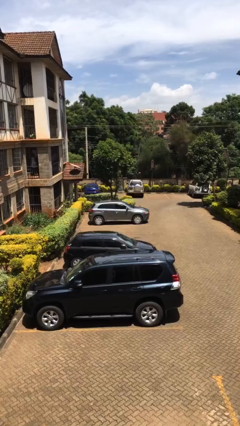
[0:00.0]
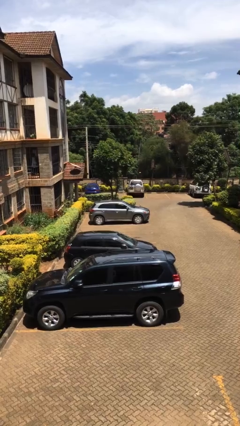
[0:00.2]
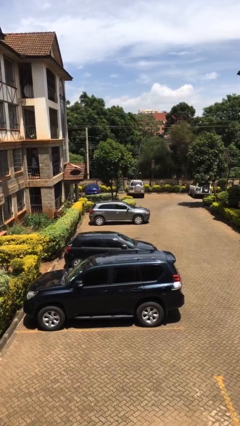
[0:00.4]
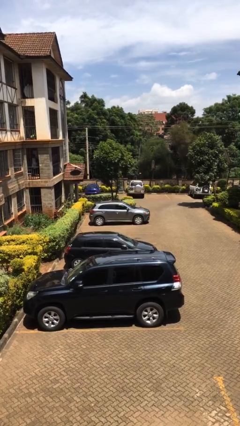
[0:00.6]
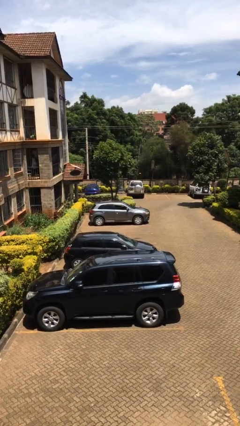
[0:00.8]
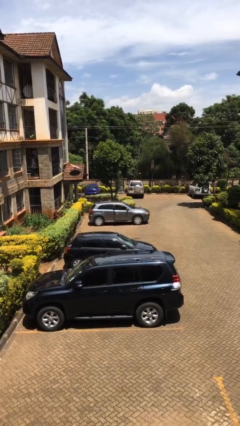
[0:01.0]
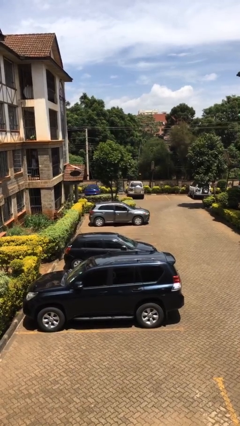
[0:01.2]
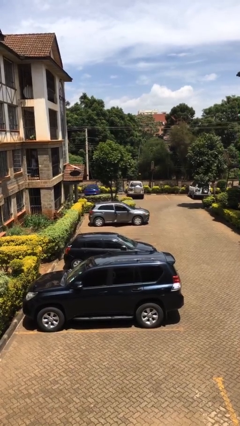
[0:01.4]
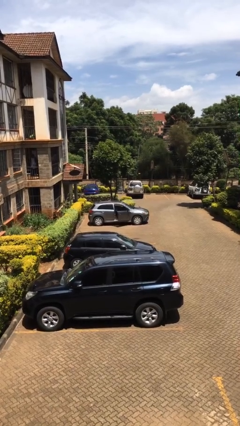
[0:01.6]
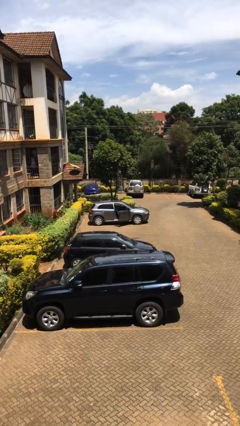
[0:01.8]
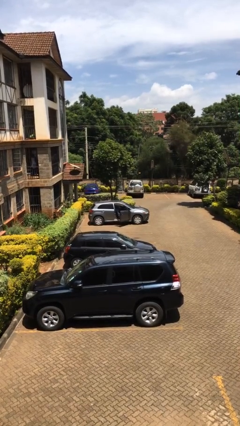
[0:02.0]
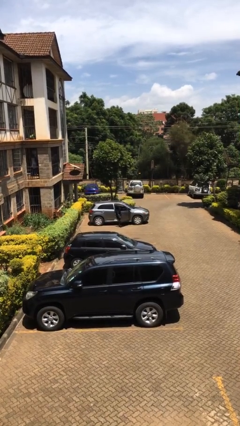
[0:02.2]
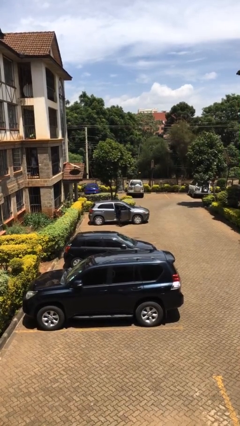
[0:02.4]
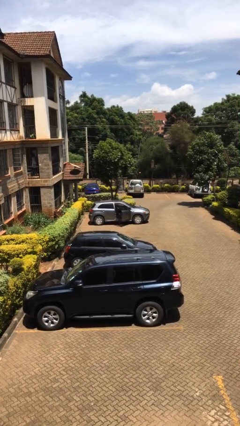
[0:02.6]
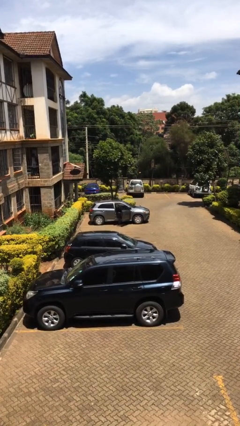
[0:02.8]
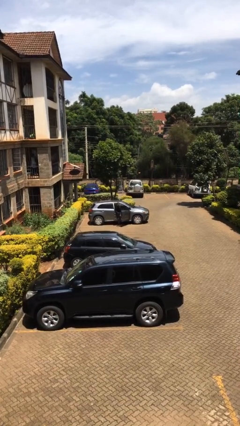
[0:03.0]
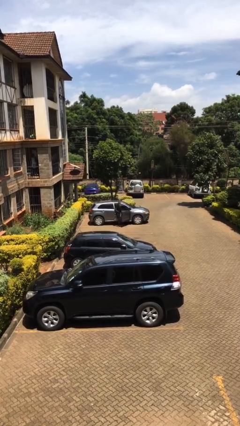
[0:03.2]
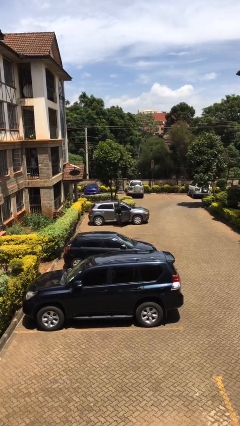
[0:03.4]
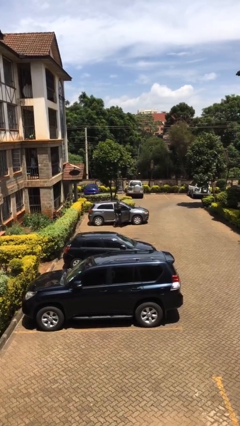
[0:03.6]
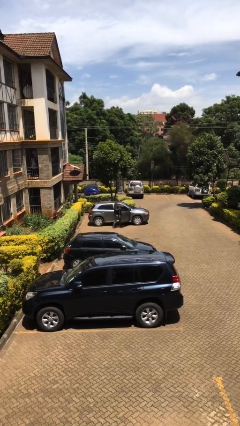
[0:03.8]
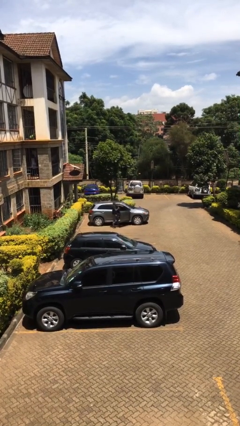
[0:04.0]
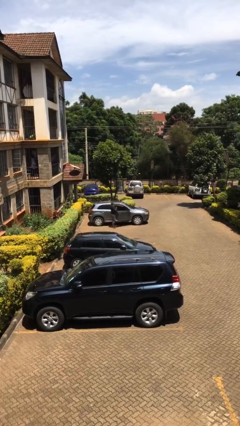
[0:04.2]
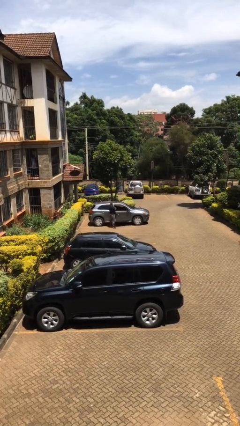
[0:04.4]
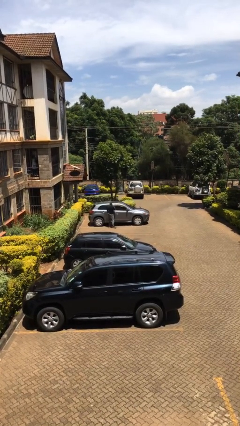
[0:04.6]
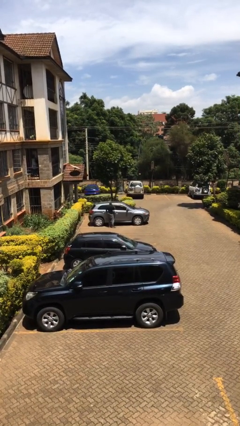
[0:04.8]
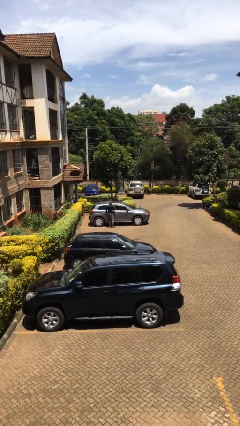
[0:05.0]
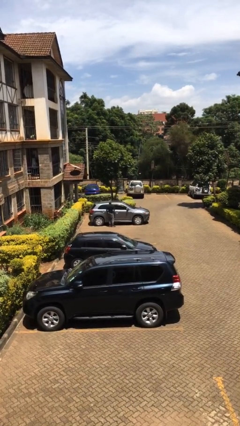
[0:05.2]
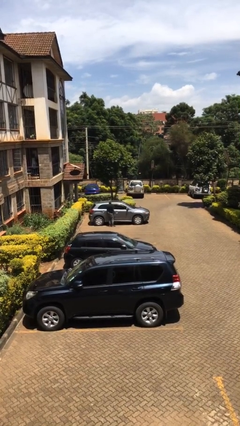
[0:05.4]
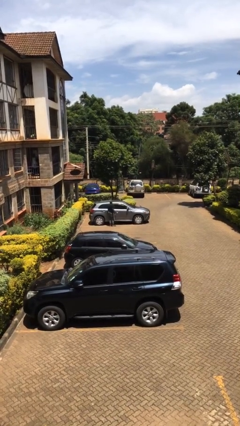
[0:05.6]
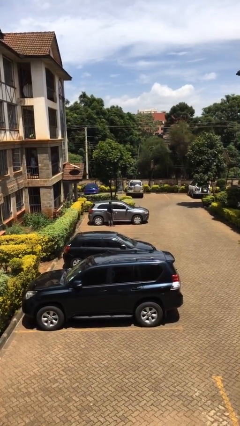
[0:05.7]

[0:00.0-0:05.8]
car drops off person

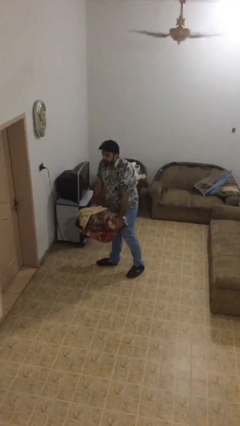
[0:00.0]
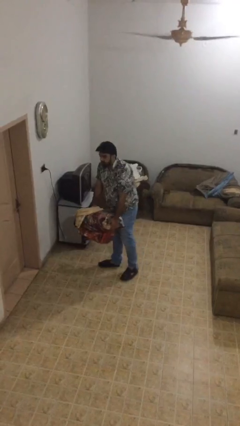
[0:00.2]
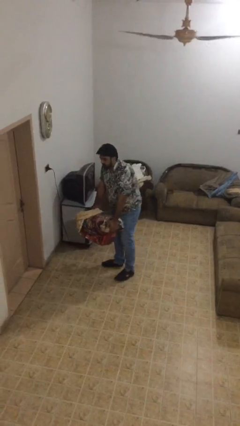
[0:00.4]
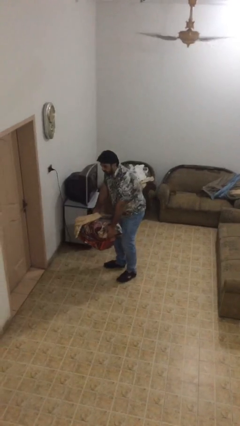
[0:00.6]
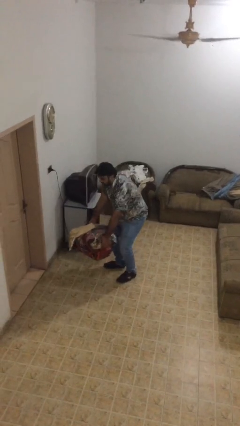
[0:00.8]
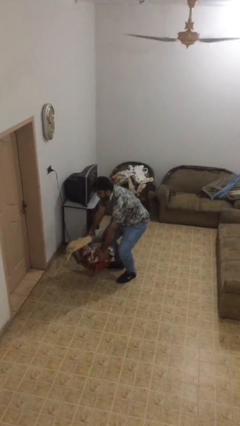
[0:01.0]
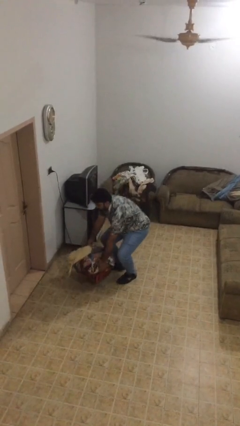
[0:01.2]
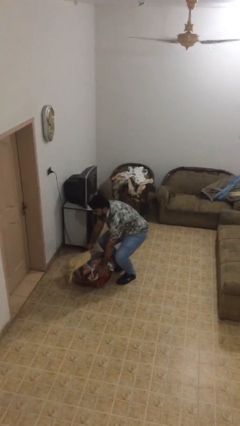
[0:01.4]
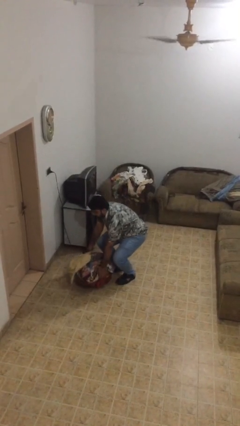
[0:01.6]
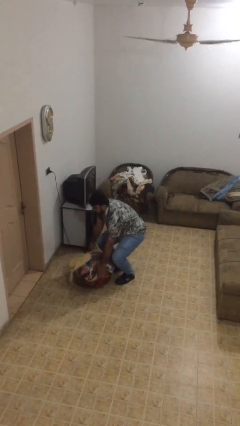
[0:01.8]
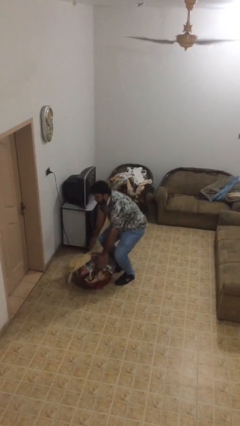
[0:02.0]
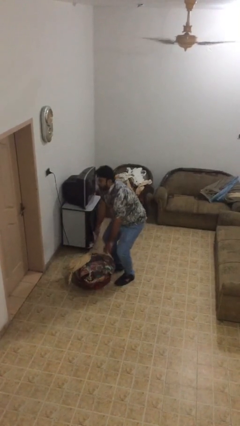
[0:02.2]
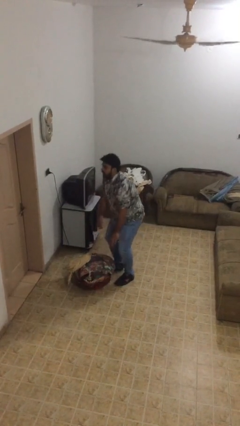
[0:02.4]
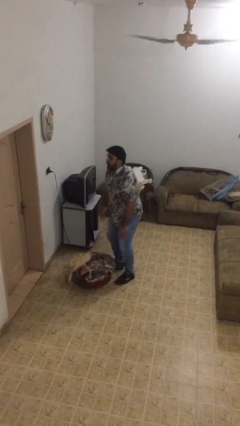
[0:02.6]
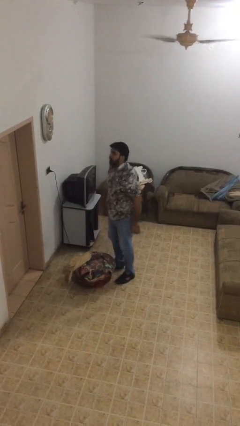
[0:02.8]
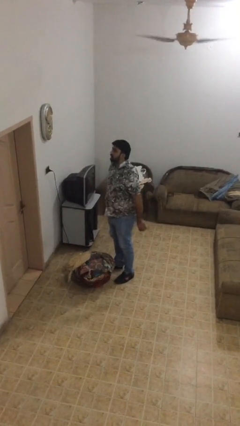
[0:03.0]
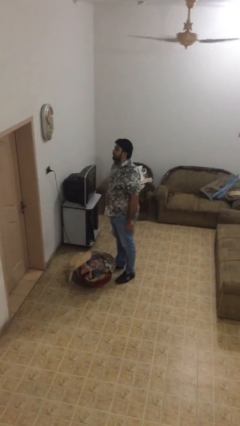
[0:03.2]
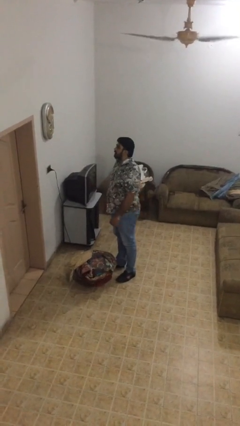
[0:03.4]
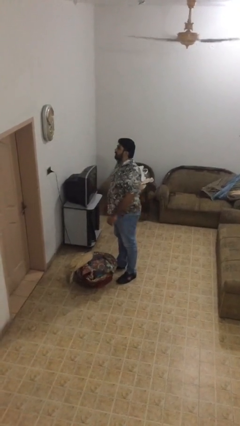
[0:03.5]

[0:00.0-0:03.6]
person puts down object on floor

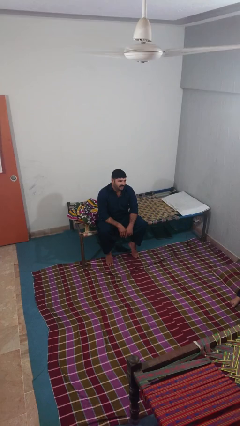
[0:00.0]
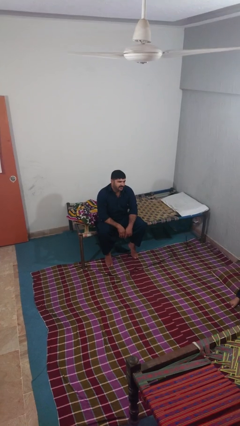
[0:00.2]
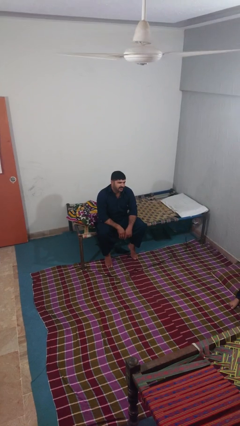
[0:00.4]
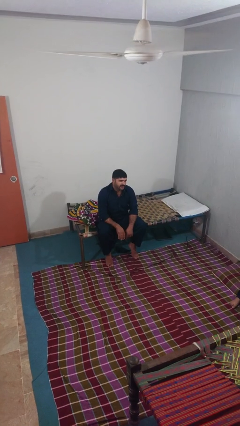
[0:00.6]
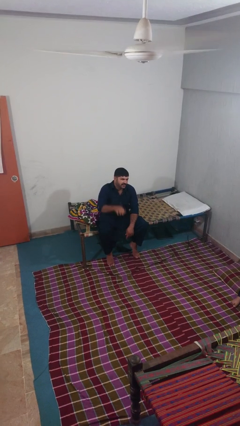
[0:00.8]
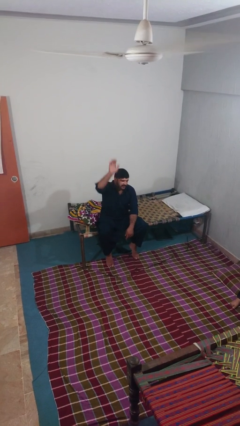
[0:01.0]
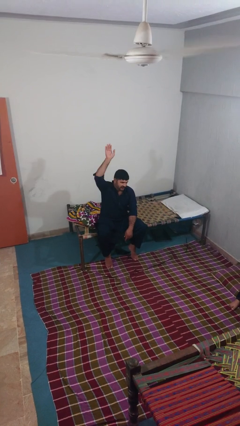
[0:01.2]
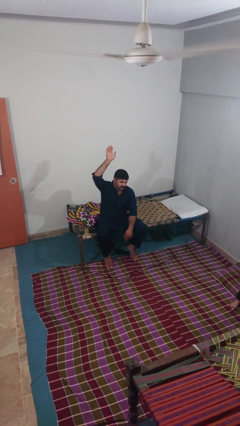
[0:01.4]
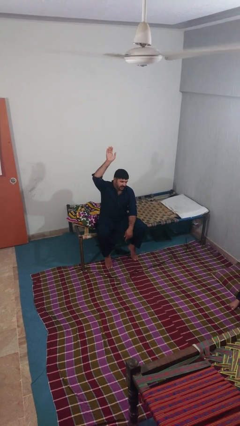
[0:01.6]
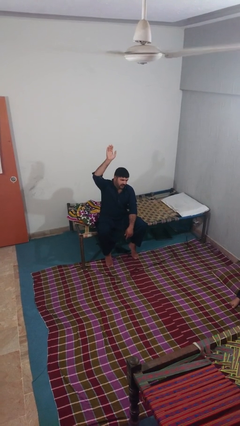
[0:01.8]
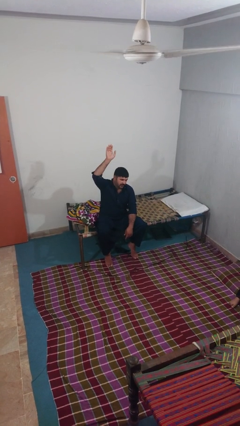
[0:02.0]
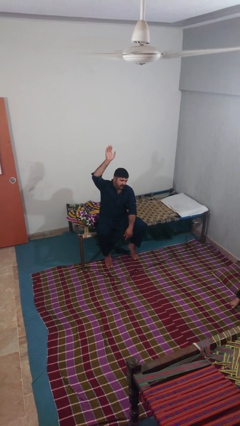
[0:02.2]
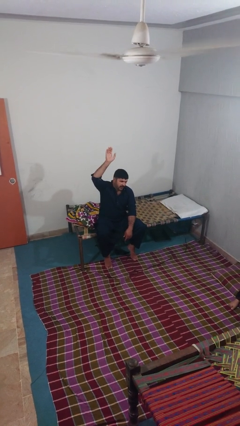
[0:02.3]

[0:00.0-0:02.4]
person gestures raise hand

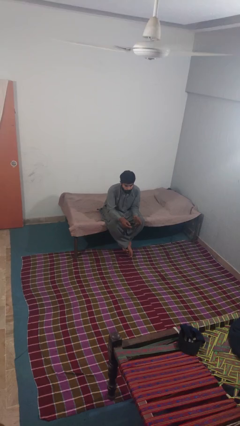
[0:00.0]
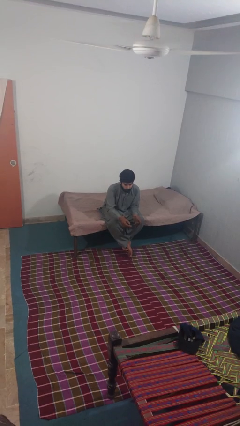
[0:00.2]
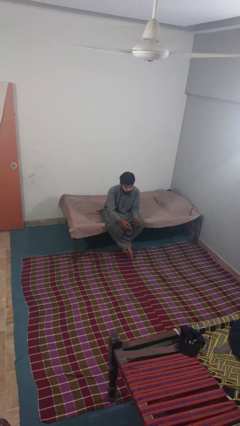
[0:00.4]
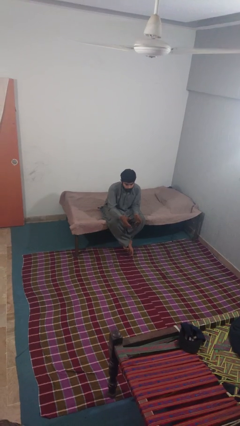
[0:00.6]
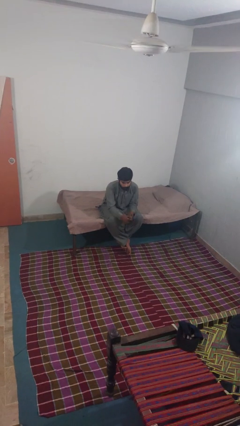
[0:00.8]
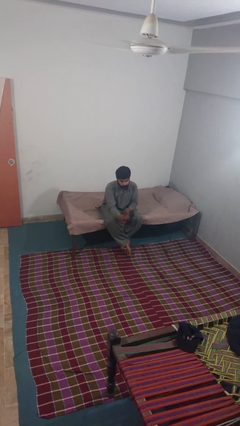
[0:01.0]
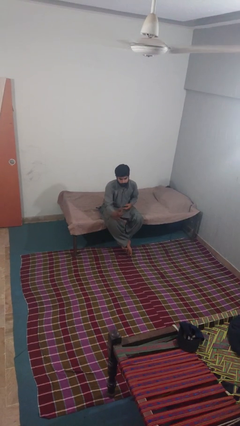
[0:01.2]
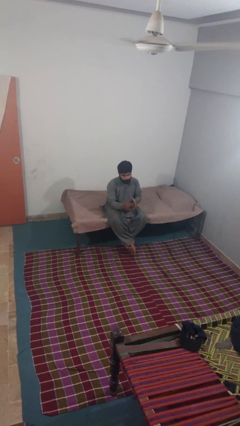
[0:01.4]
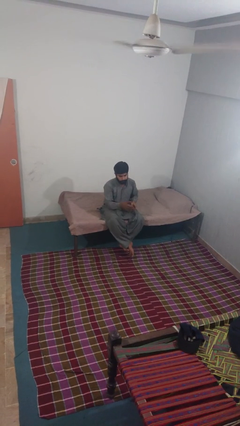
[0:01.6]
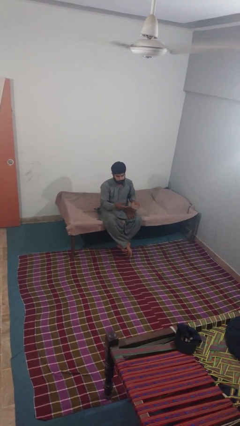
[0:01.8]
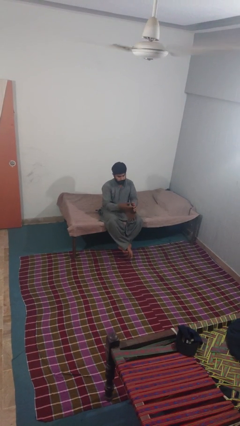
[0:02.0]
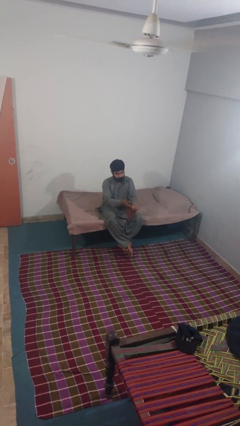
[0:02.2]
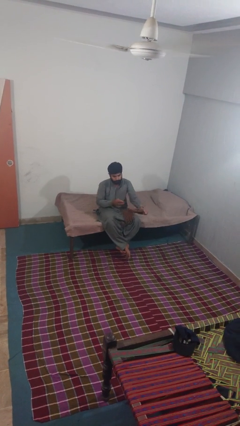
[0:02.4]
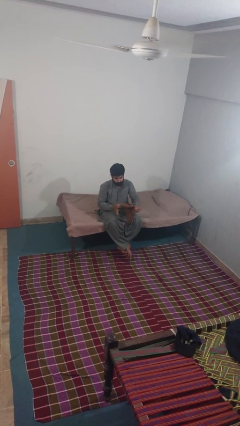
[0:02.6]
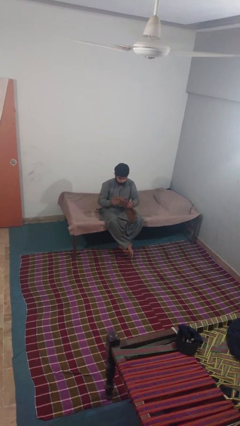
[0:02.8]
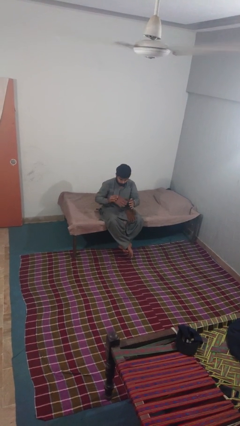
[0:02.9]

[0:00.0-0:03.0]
person takes off gloves

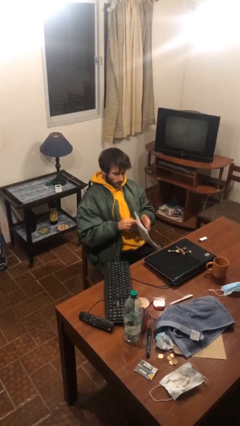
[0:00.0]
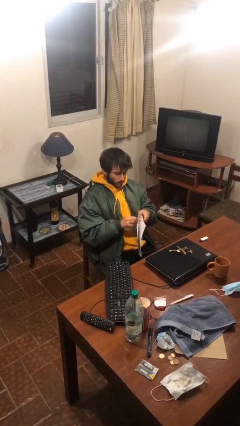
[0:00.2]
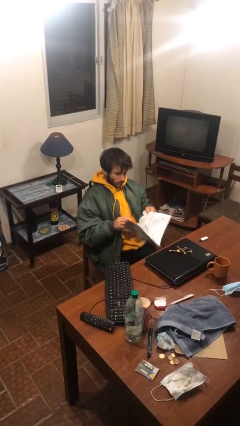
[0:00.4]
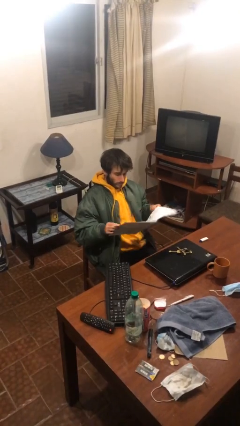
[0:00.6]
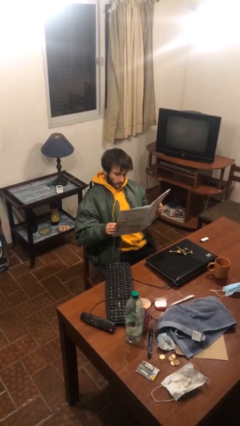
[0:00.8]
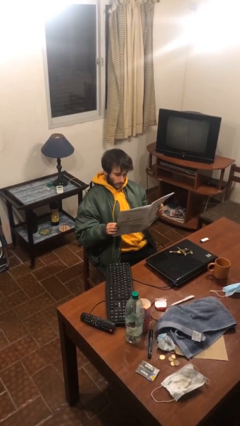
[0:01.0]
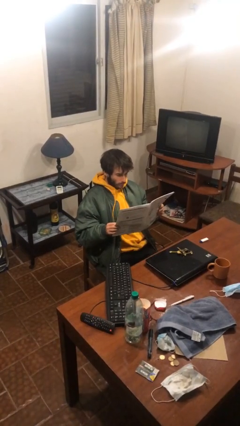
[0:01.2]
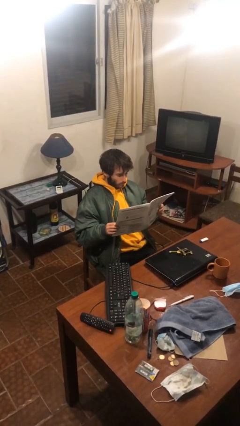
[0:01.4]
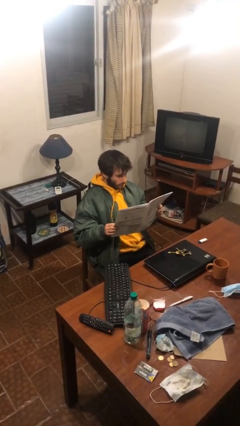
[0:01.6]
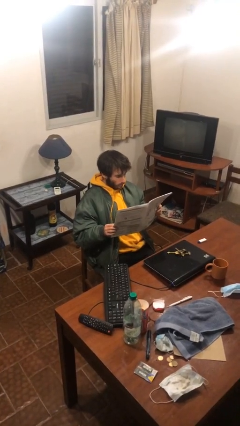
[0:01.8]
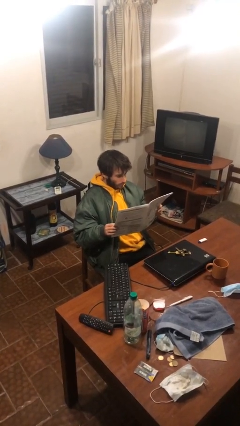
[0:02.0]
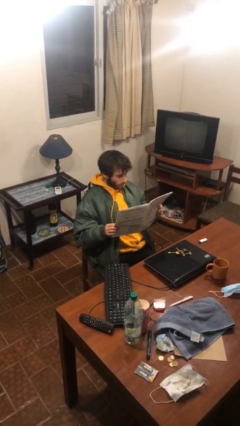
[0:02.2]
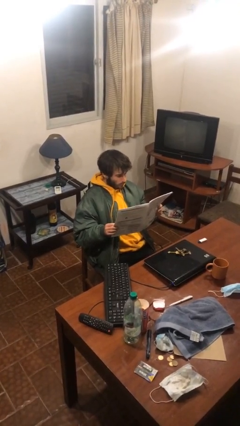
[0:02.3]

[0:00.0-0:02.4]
person reads document

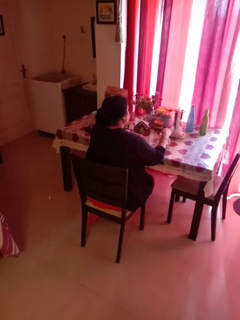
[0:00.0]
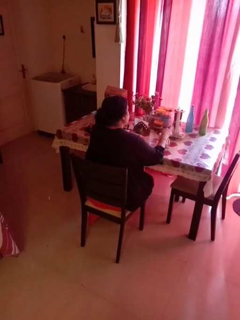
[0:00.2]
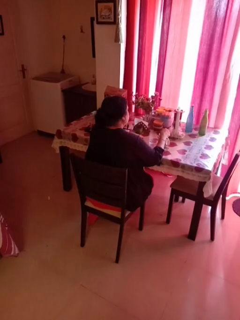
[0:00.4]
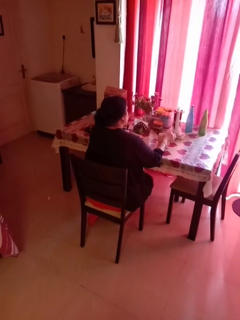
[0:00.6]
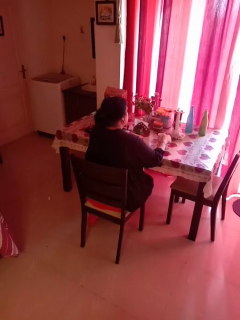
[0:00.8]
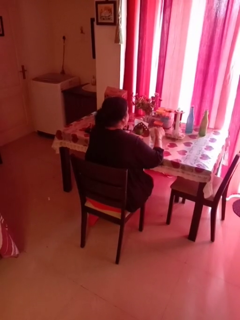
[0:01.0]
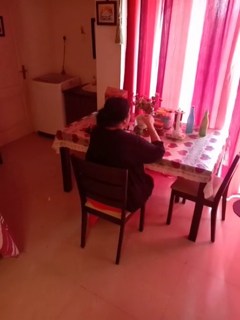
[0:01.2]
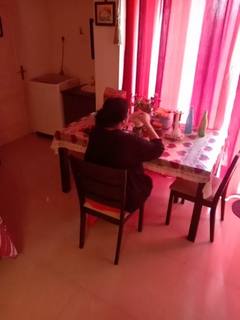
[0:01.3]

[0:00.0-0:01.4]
person stirs mug
